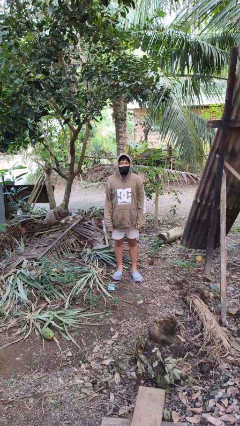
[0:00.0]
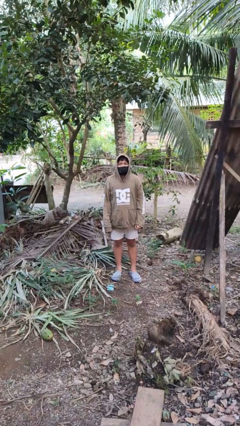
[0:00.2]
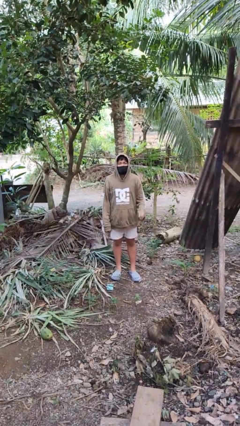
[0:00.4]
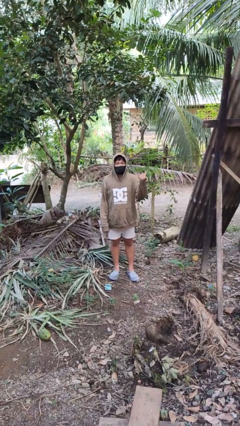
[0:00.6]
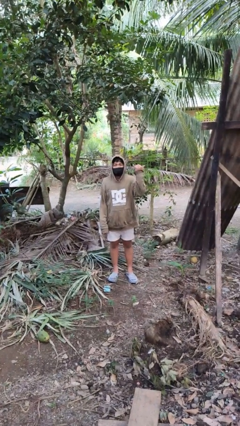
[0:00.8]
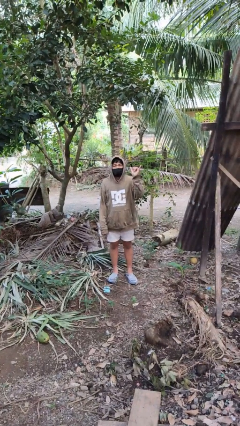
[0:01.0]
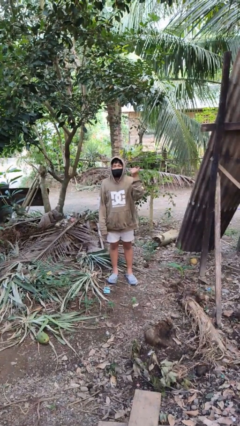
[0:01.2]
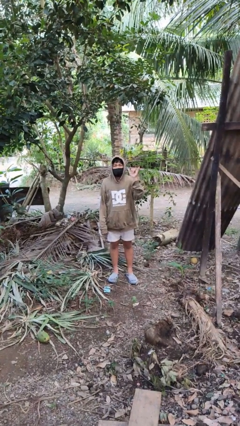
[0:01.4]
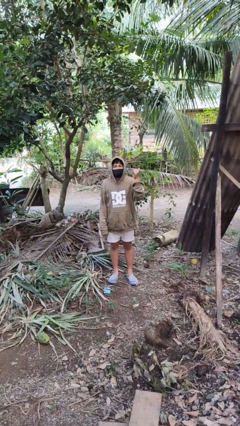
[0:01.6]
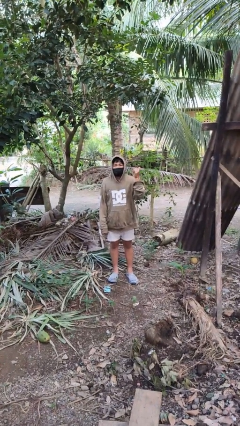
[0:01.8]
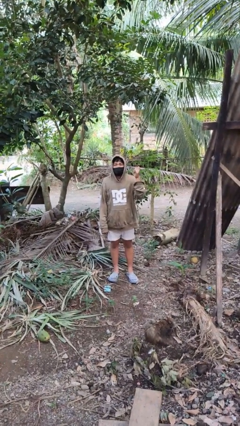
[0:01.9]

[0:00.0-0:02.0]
person gestures hang loose

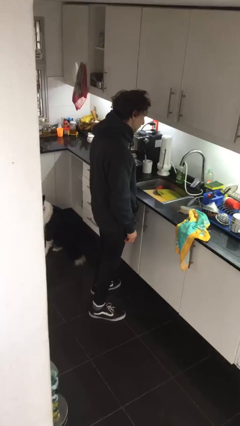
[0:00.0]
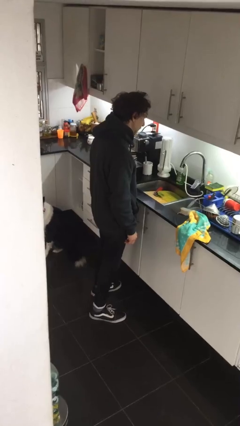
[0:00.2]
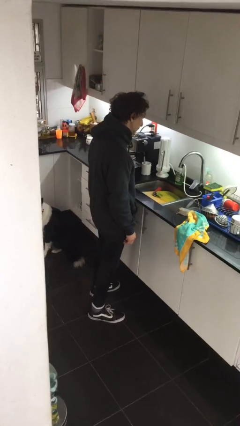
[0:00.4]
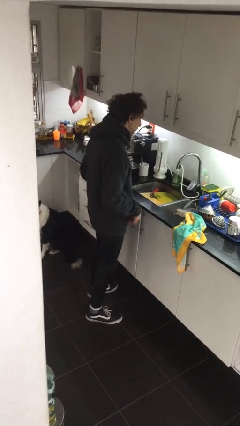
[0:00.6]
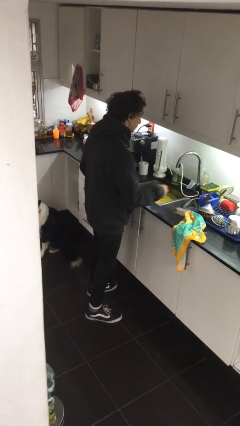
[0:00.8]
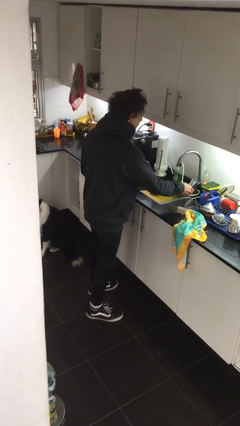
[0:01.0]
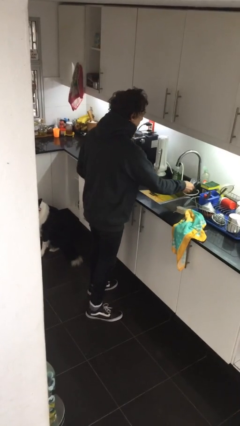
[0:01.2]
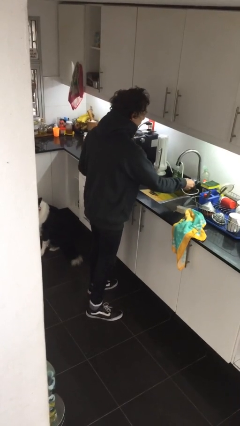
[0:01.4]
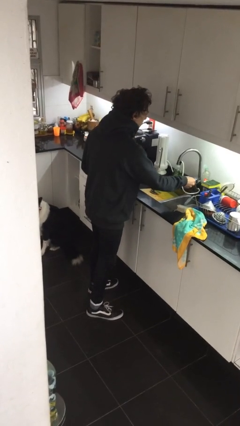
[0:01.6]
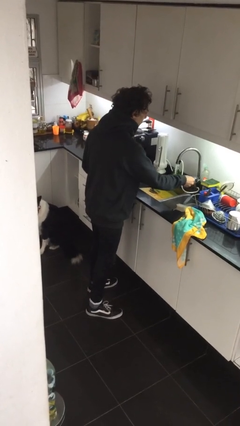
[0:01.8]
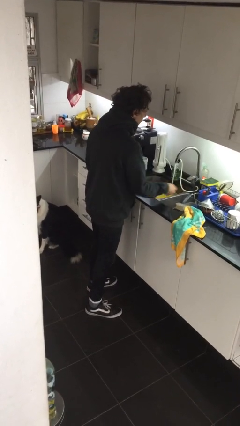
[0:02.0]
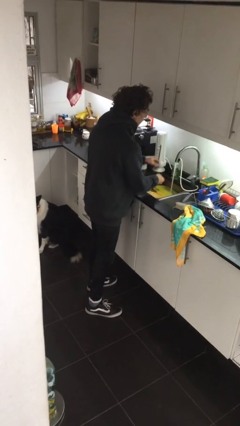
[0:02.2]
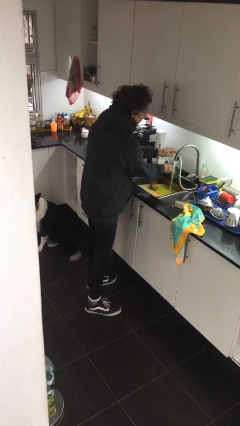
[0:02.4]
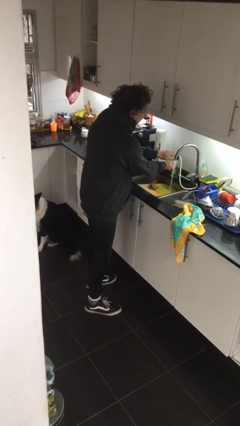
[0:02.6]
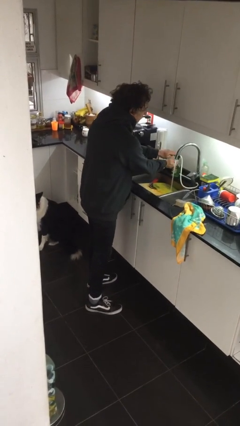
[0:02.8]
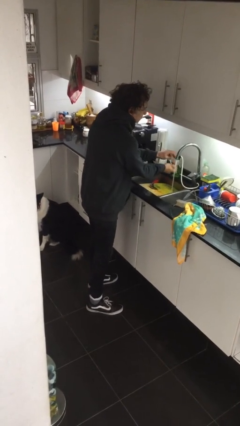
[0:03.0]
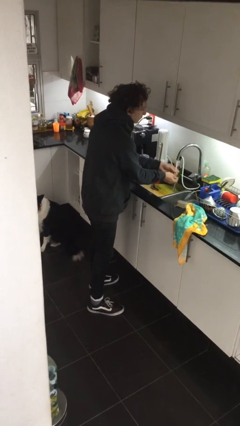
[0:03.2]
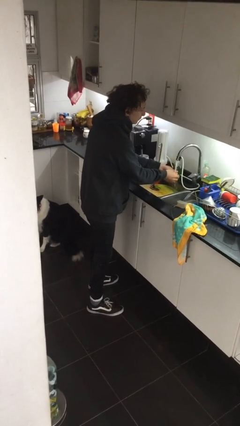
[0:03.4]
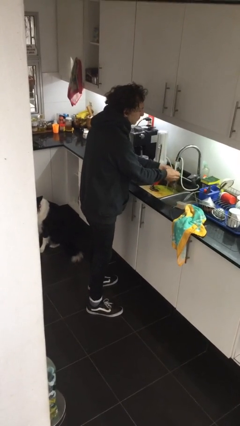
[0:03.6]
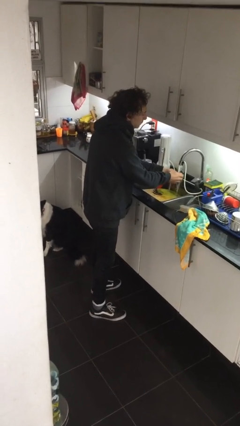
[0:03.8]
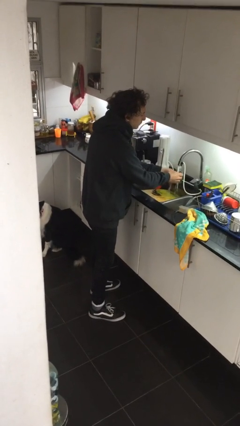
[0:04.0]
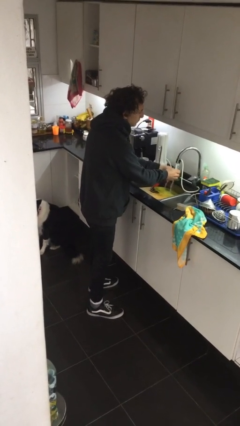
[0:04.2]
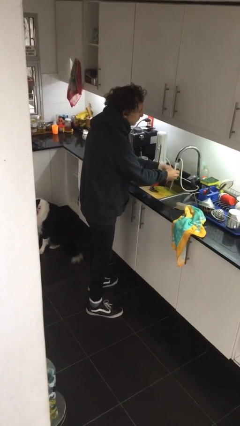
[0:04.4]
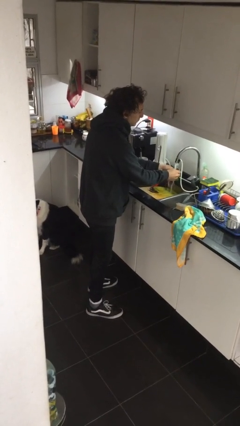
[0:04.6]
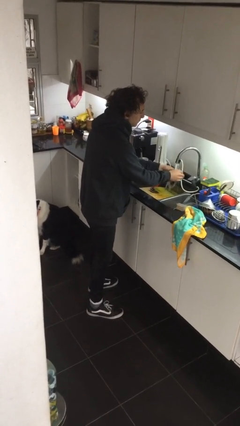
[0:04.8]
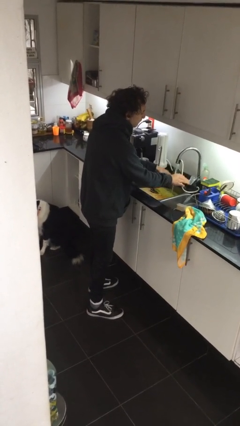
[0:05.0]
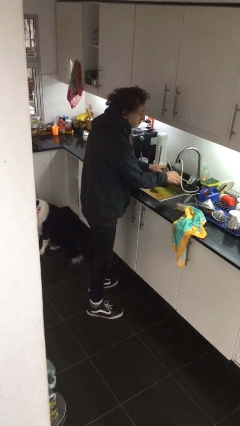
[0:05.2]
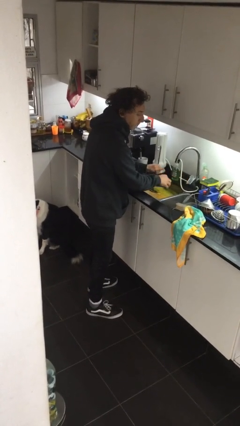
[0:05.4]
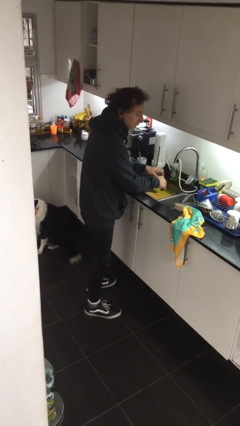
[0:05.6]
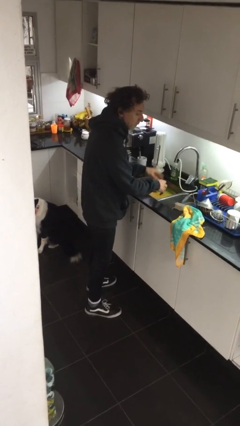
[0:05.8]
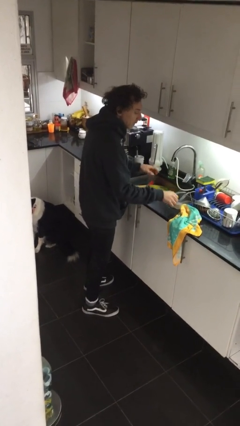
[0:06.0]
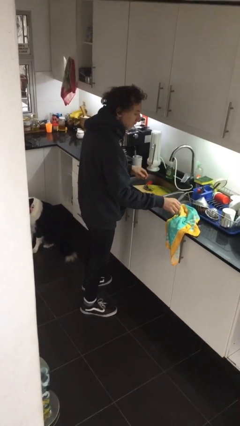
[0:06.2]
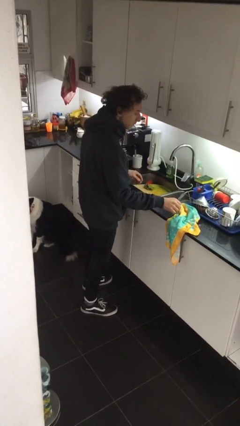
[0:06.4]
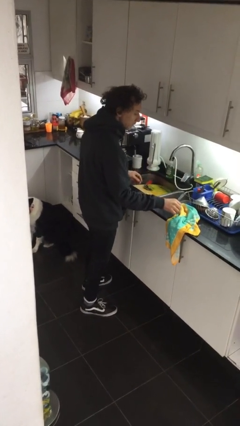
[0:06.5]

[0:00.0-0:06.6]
person washes hands

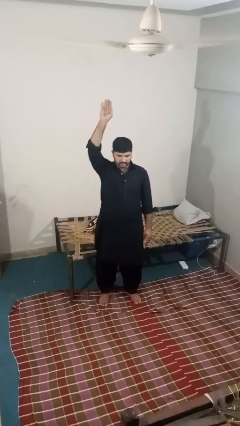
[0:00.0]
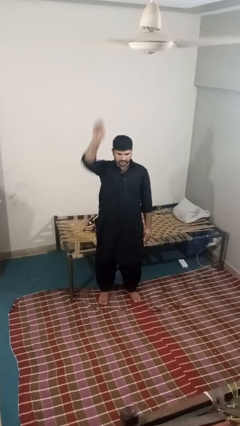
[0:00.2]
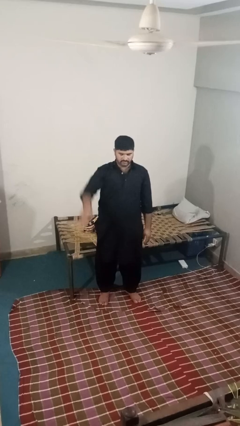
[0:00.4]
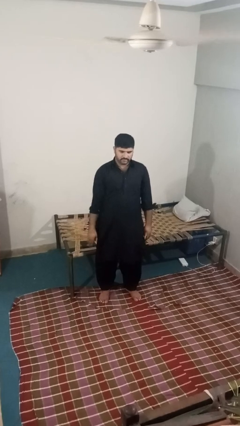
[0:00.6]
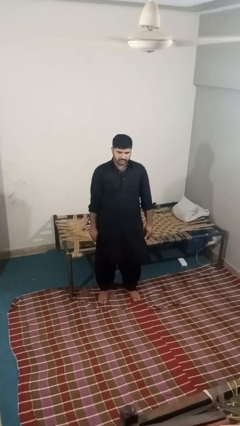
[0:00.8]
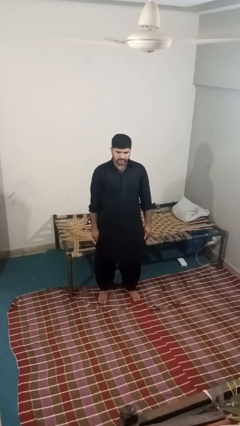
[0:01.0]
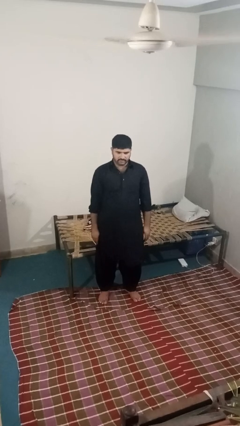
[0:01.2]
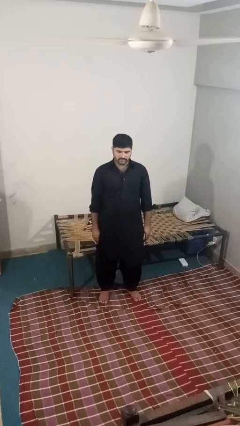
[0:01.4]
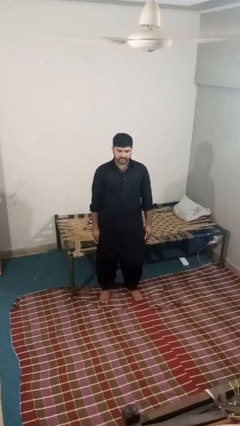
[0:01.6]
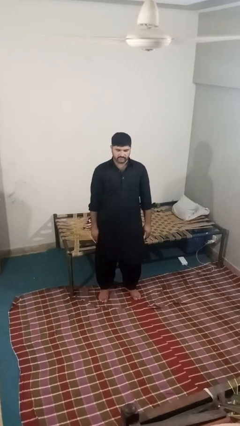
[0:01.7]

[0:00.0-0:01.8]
person gestures lower hand

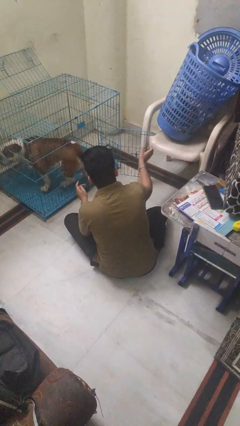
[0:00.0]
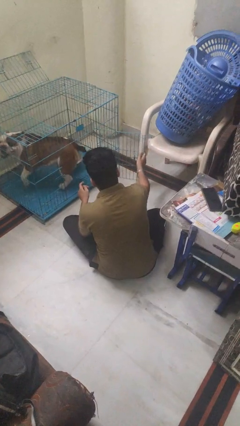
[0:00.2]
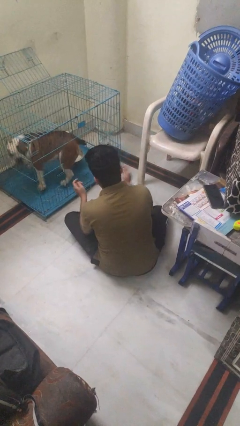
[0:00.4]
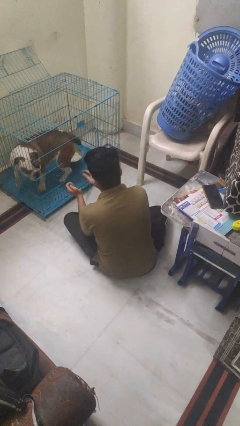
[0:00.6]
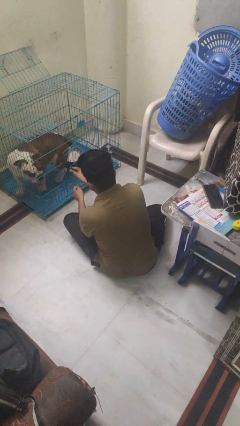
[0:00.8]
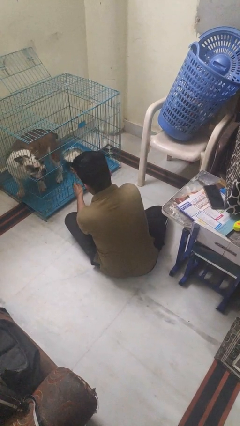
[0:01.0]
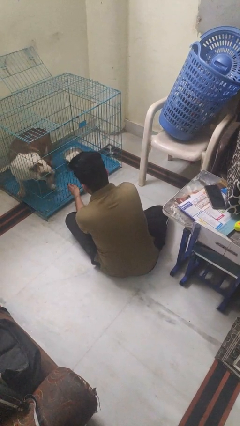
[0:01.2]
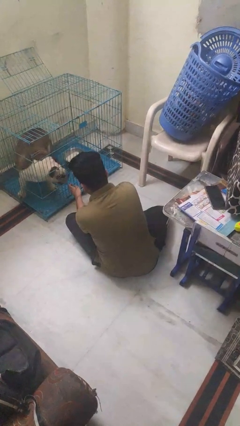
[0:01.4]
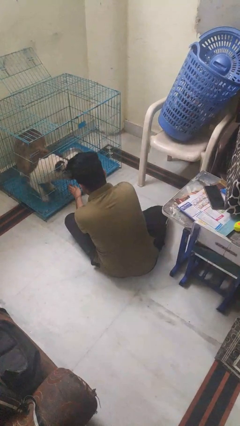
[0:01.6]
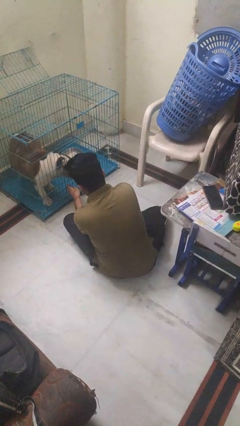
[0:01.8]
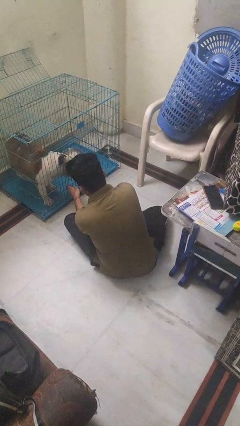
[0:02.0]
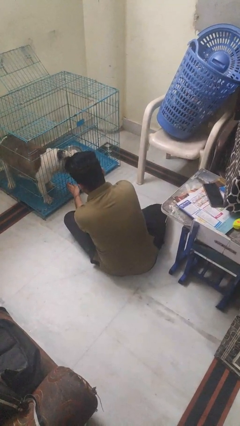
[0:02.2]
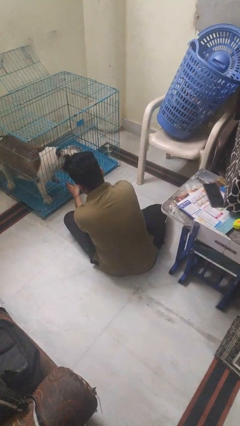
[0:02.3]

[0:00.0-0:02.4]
person crates dog

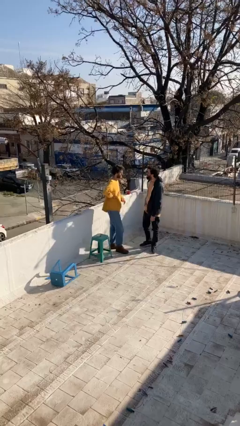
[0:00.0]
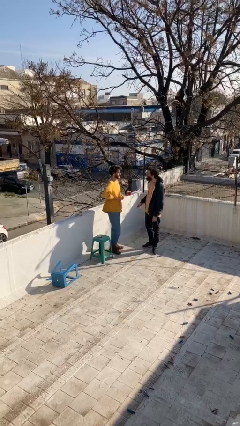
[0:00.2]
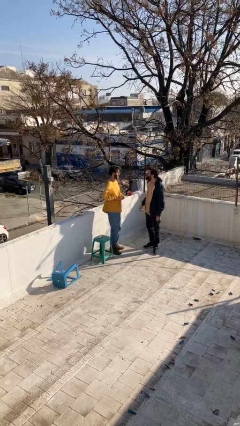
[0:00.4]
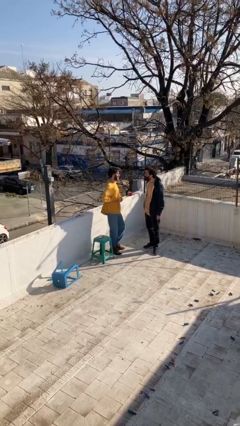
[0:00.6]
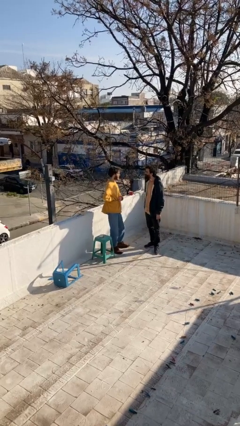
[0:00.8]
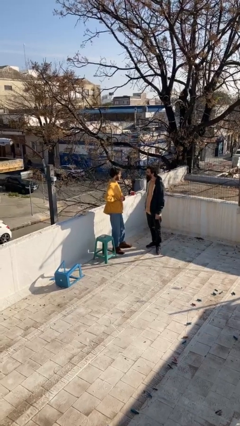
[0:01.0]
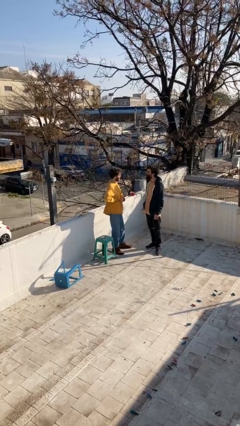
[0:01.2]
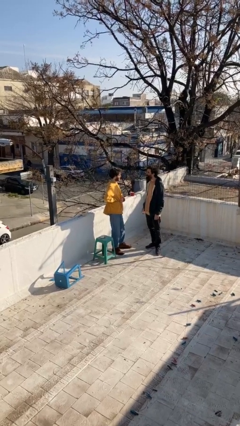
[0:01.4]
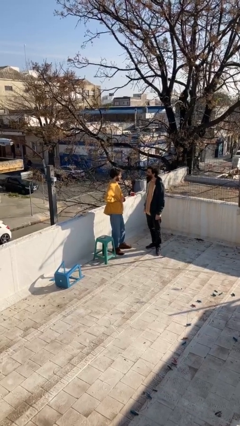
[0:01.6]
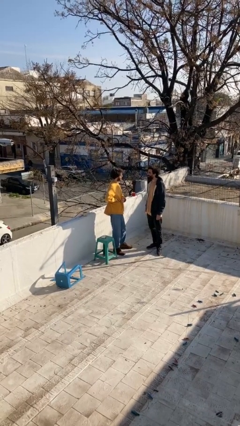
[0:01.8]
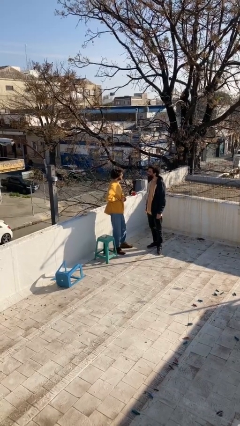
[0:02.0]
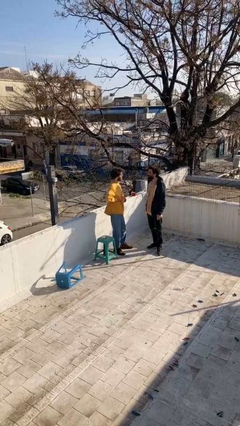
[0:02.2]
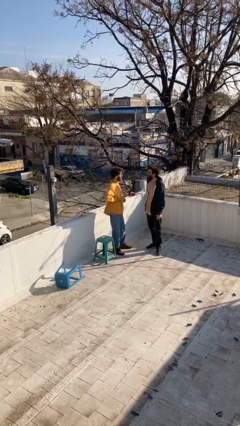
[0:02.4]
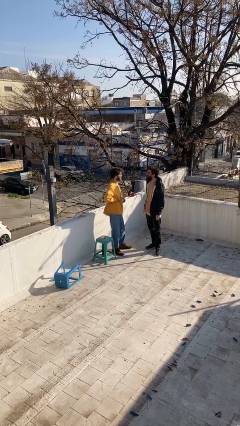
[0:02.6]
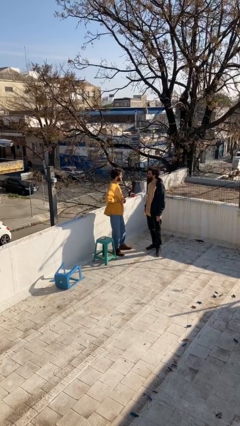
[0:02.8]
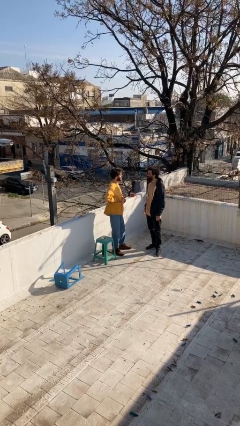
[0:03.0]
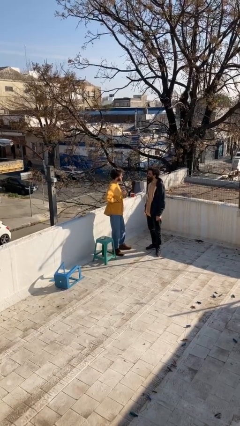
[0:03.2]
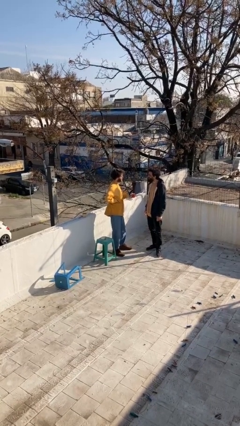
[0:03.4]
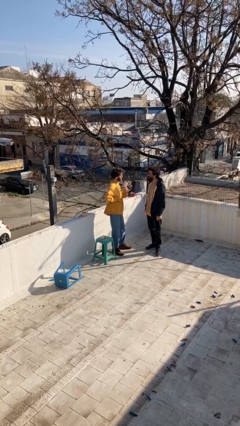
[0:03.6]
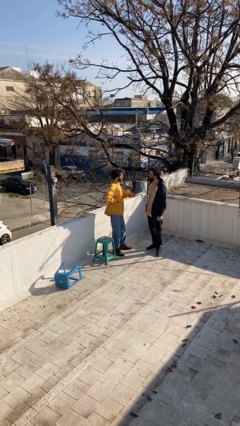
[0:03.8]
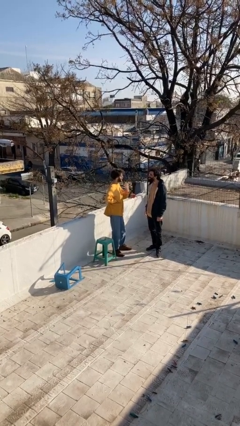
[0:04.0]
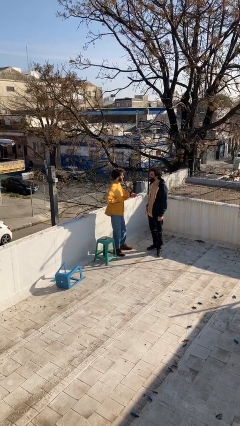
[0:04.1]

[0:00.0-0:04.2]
person talks to person

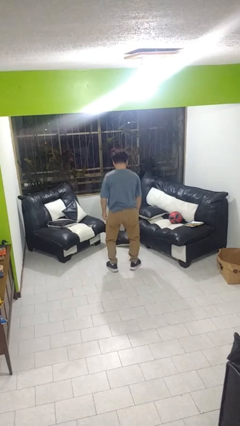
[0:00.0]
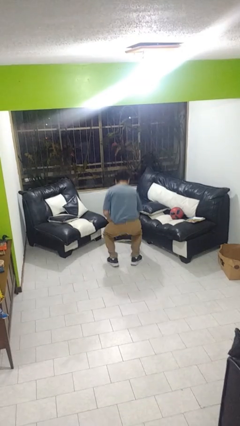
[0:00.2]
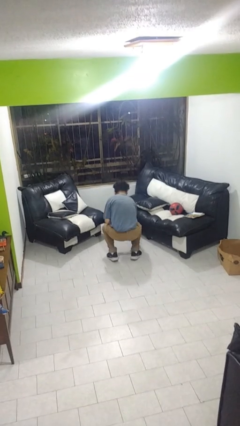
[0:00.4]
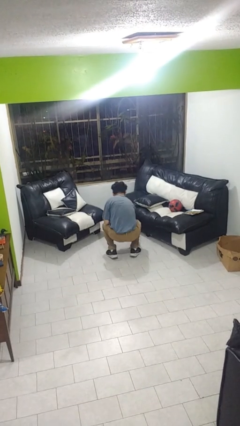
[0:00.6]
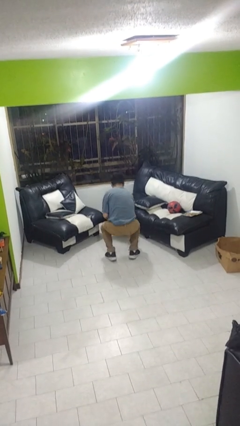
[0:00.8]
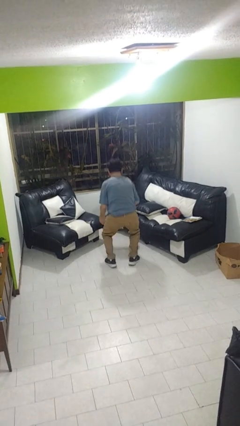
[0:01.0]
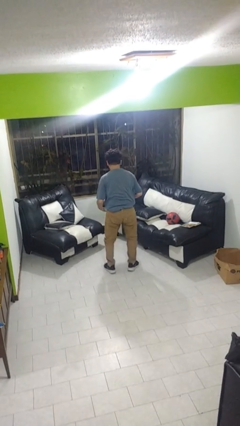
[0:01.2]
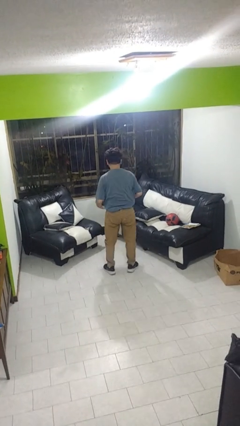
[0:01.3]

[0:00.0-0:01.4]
person picks up object from floor
